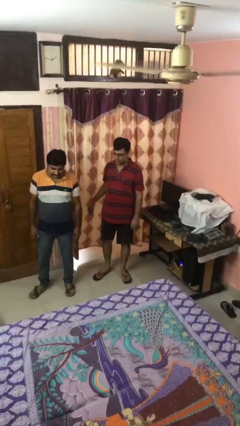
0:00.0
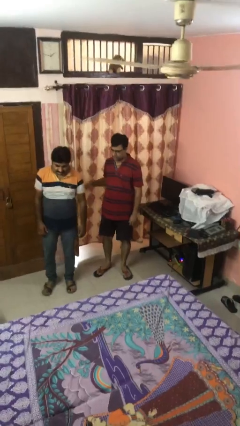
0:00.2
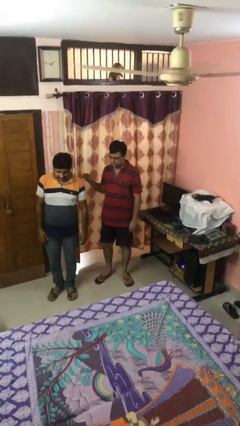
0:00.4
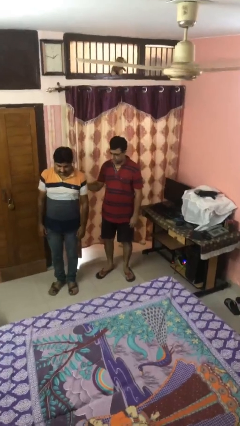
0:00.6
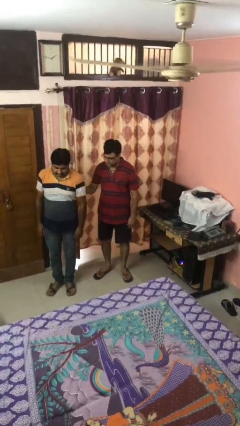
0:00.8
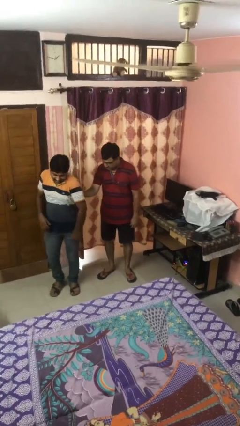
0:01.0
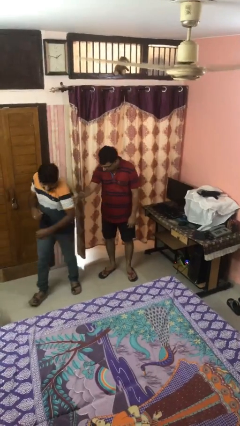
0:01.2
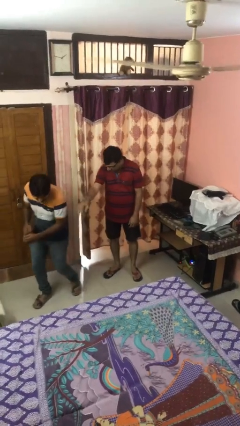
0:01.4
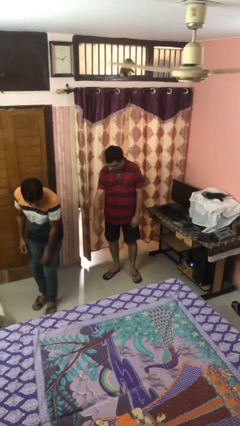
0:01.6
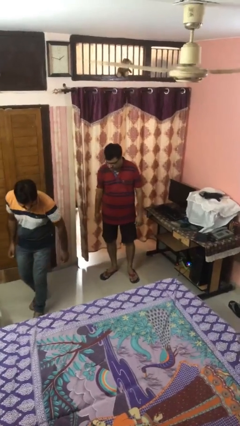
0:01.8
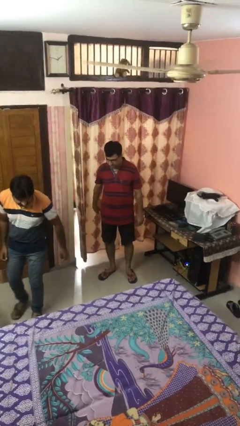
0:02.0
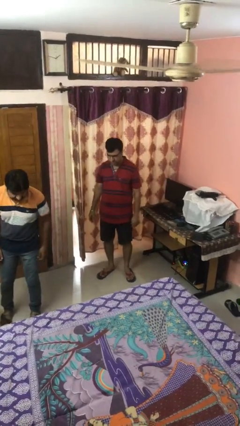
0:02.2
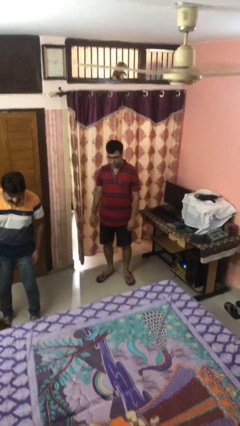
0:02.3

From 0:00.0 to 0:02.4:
person shoves person

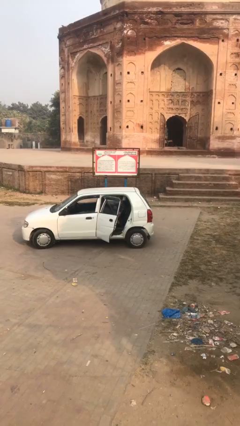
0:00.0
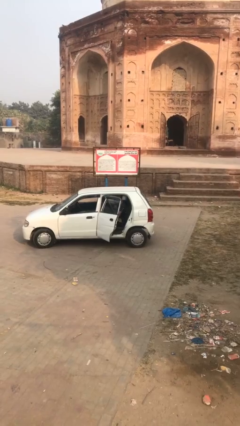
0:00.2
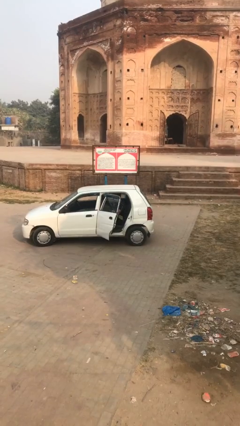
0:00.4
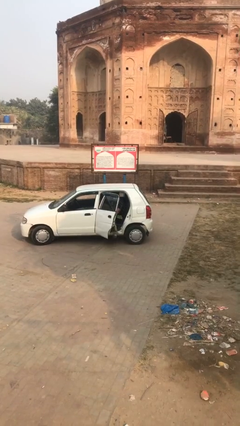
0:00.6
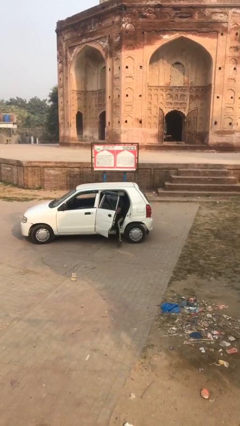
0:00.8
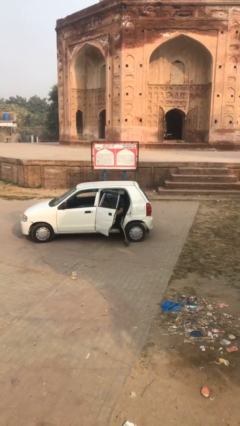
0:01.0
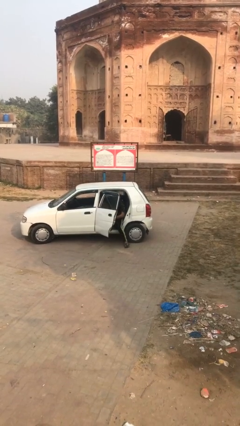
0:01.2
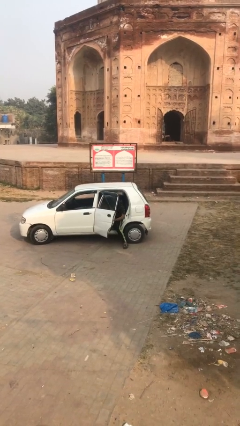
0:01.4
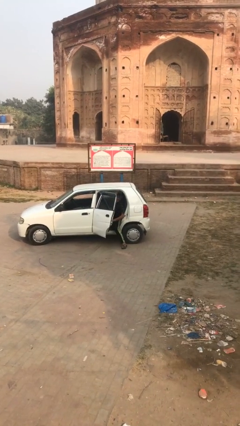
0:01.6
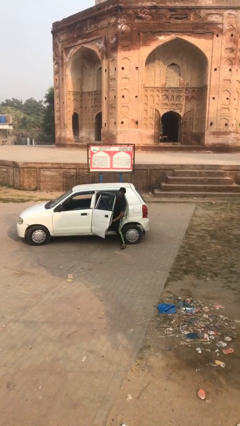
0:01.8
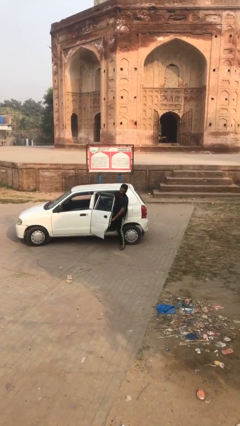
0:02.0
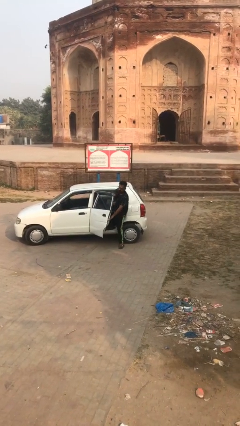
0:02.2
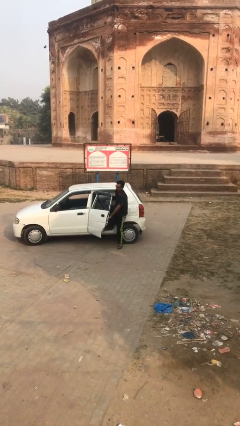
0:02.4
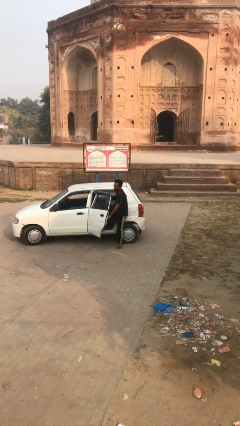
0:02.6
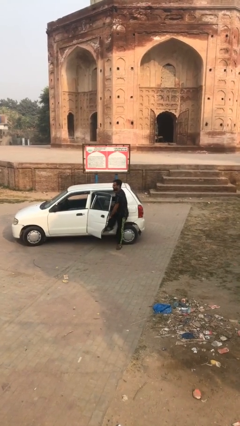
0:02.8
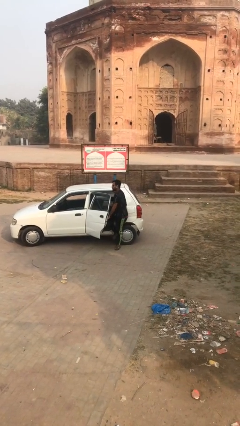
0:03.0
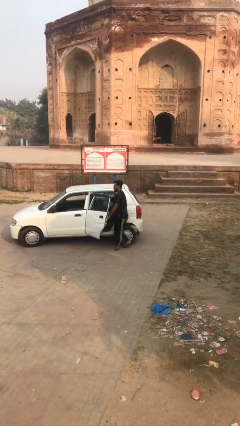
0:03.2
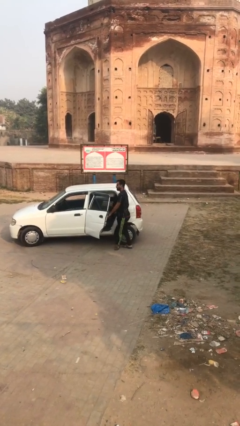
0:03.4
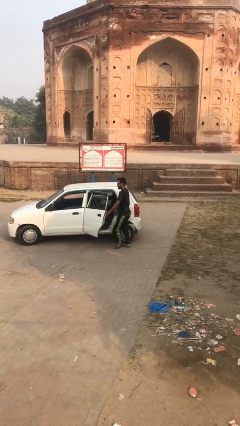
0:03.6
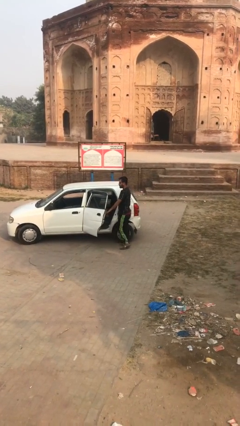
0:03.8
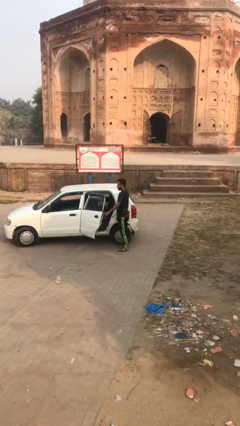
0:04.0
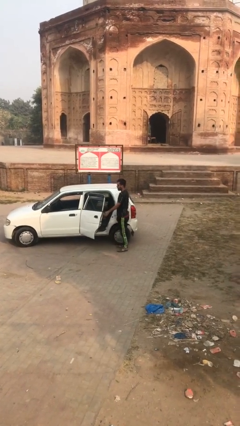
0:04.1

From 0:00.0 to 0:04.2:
person exits car

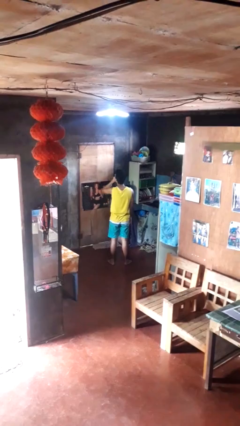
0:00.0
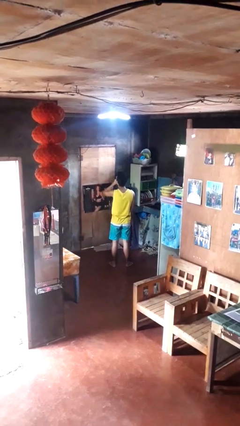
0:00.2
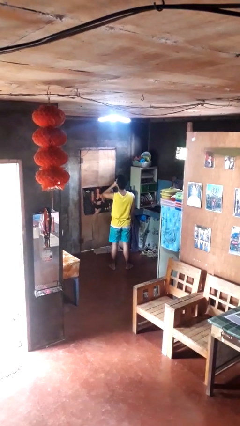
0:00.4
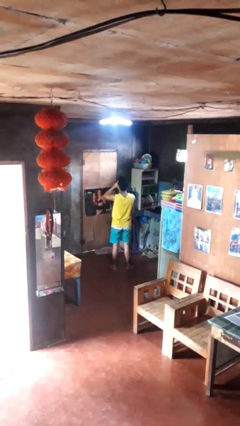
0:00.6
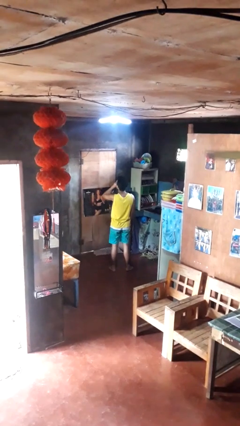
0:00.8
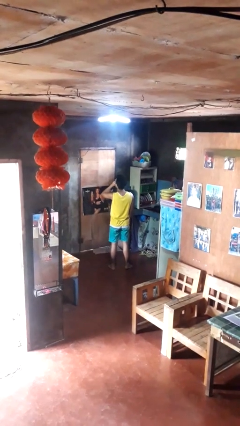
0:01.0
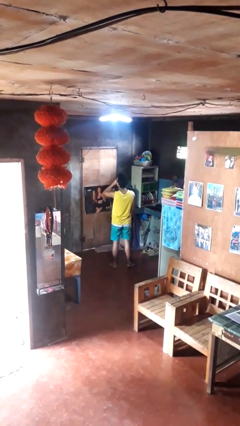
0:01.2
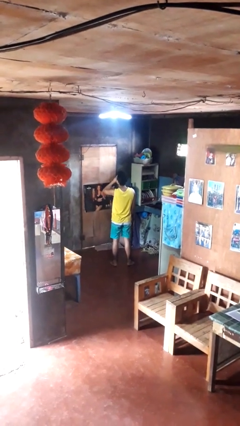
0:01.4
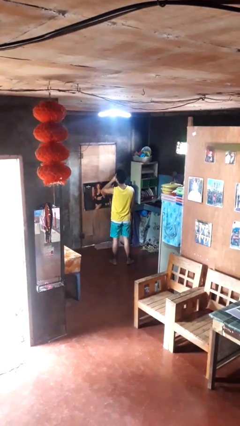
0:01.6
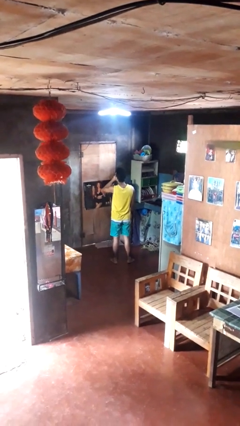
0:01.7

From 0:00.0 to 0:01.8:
person yawns

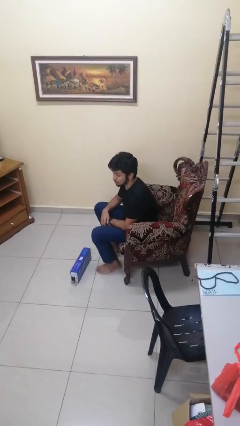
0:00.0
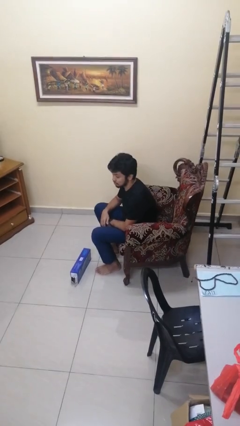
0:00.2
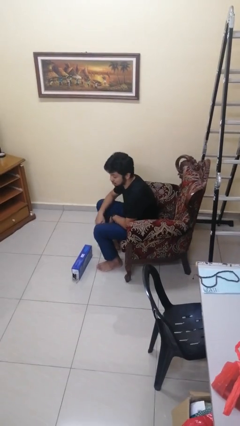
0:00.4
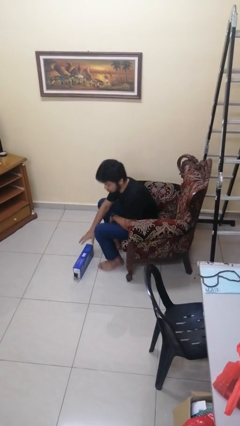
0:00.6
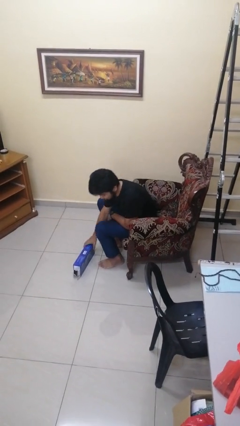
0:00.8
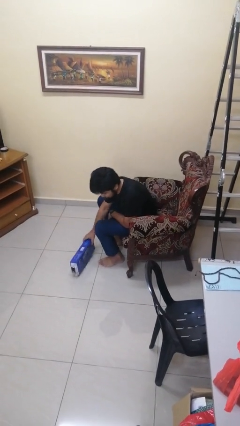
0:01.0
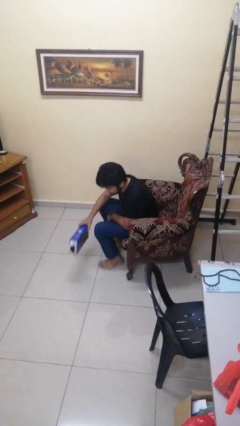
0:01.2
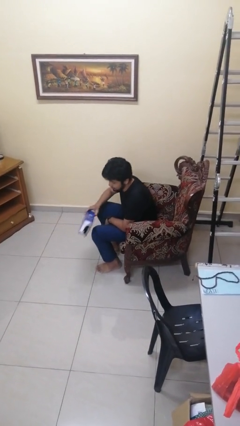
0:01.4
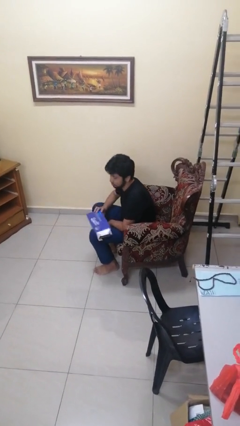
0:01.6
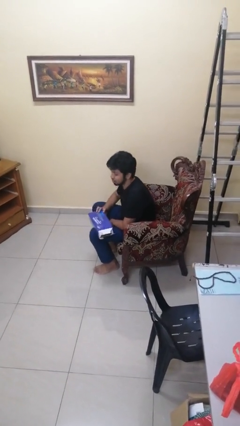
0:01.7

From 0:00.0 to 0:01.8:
person picks up object from floor

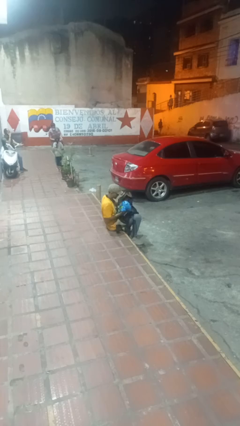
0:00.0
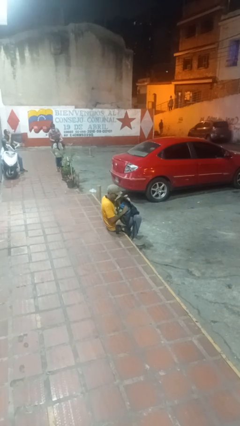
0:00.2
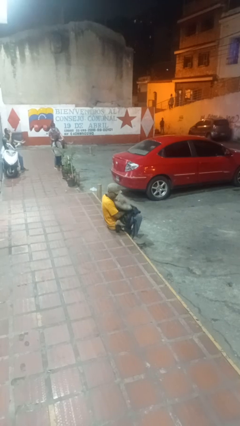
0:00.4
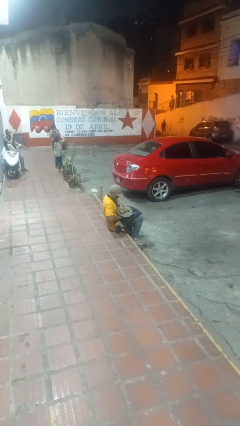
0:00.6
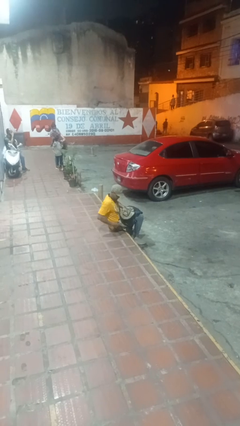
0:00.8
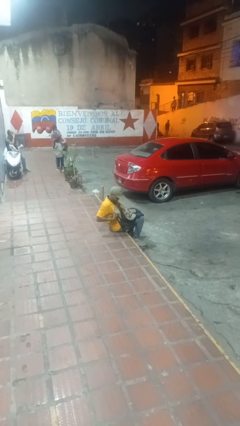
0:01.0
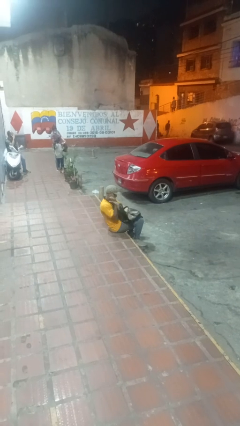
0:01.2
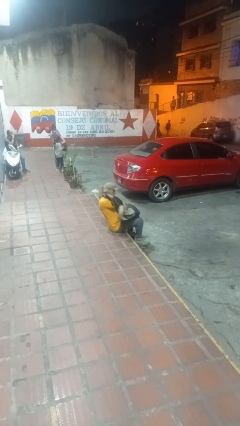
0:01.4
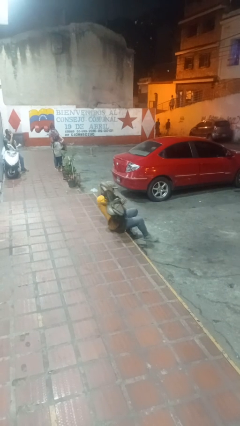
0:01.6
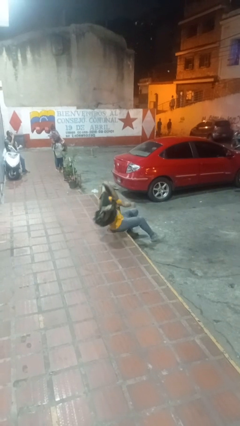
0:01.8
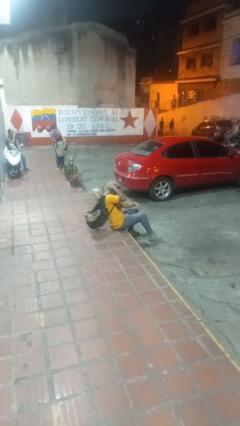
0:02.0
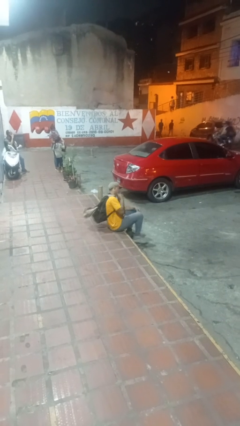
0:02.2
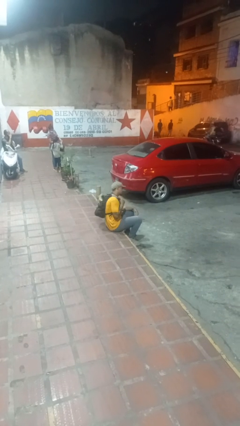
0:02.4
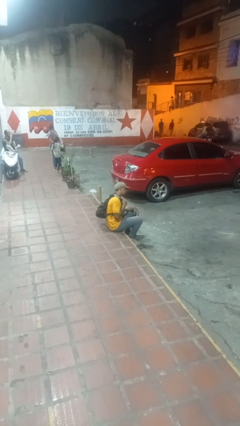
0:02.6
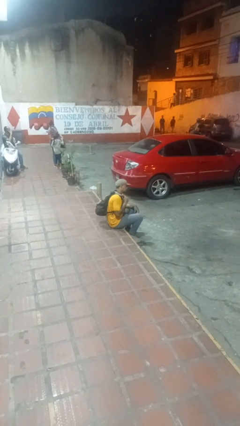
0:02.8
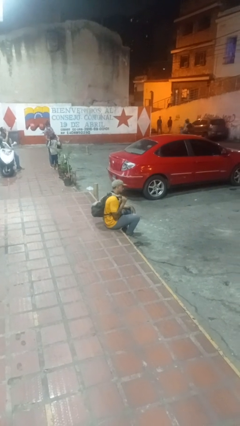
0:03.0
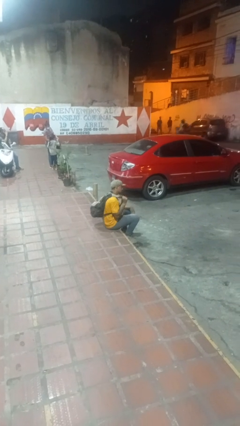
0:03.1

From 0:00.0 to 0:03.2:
person puts object into backpack

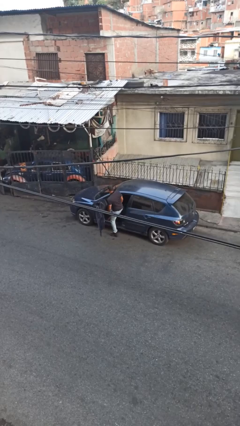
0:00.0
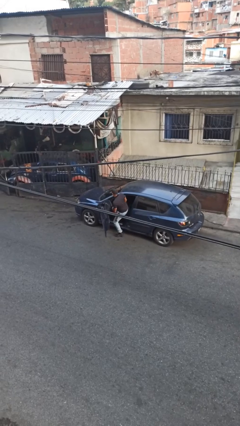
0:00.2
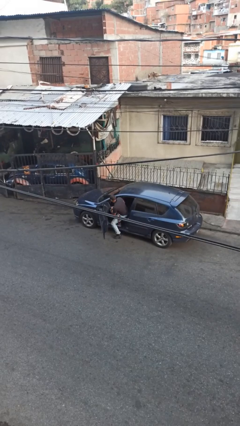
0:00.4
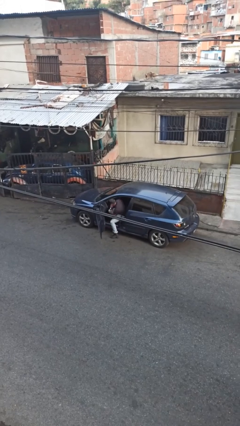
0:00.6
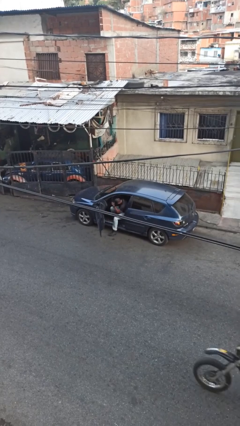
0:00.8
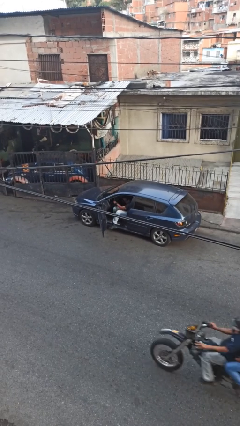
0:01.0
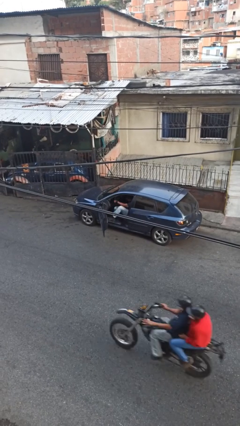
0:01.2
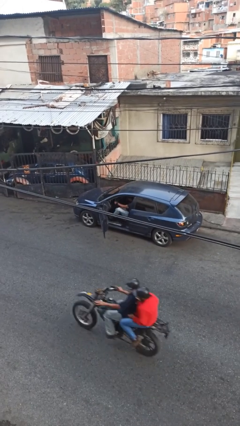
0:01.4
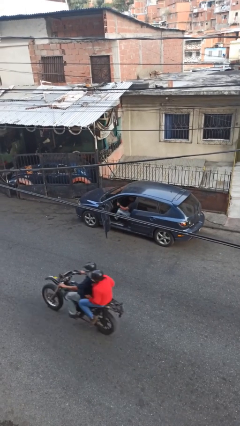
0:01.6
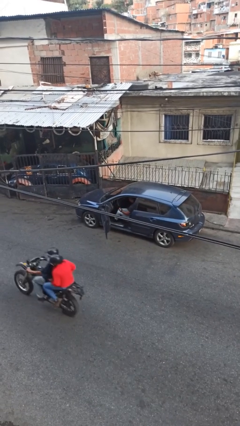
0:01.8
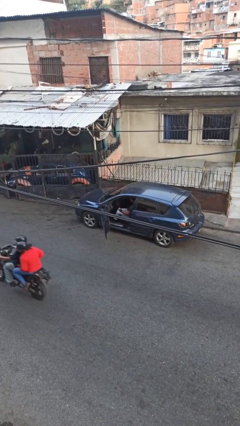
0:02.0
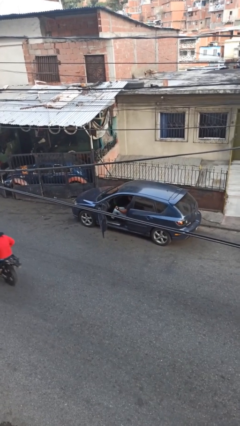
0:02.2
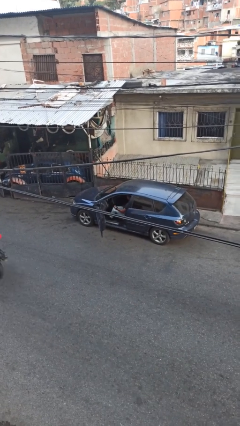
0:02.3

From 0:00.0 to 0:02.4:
person enters car

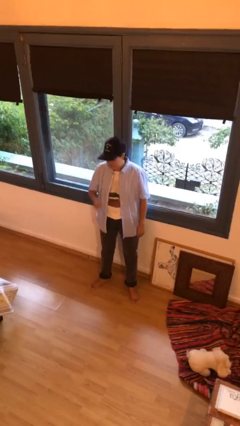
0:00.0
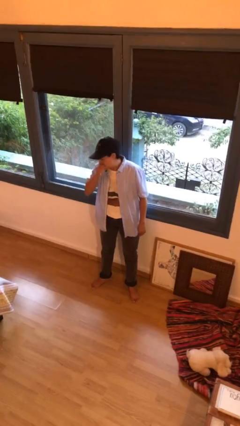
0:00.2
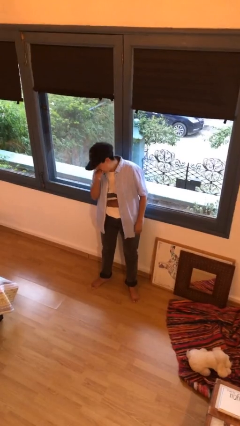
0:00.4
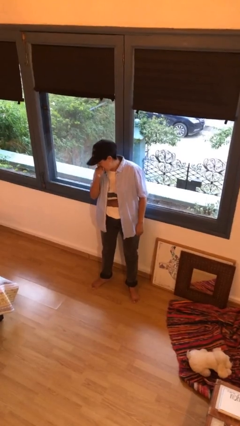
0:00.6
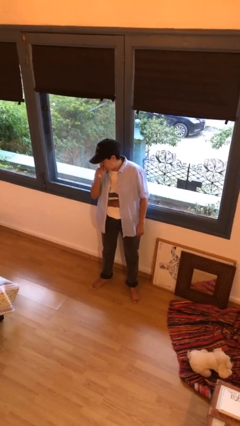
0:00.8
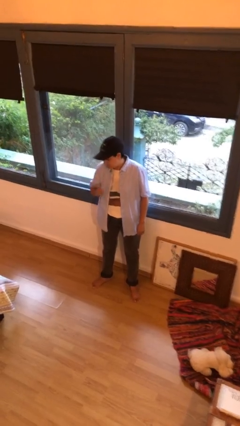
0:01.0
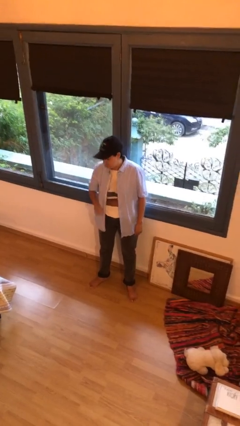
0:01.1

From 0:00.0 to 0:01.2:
person sneezes into hand

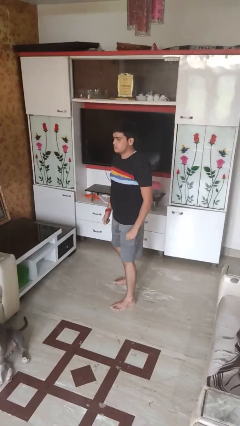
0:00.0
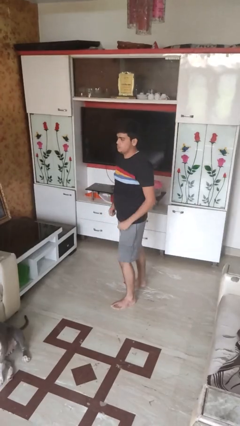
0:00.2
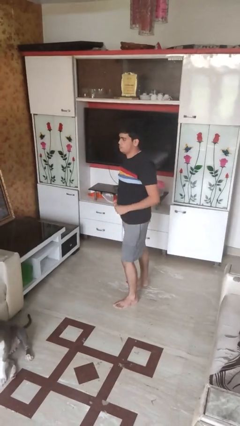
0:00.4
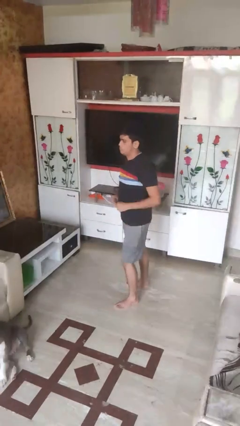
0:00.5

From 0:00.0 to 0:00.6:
person punches
